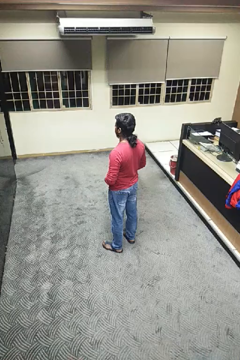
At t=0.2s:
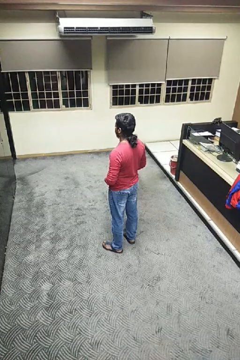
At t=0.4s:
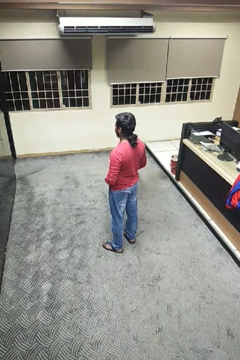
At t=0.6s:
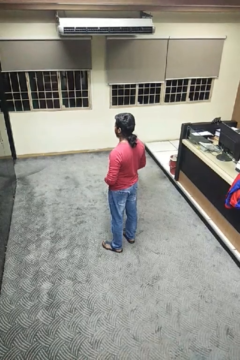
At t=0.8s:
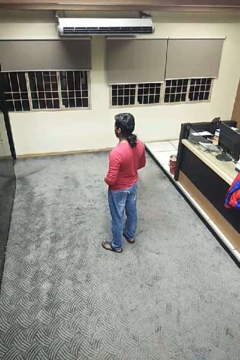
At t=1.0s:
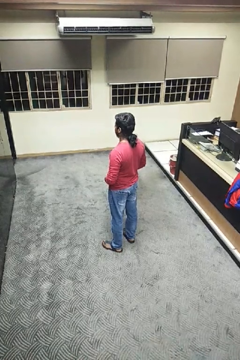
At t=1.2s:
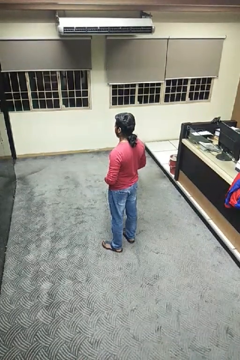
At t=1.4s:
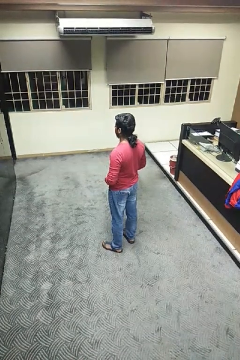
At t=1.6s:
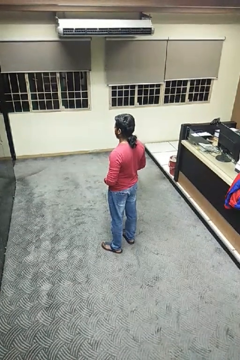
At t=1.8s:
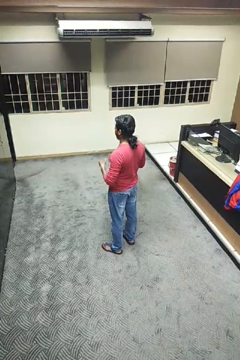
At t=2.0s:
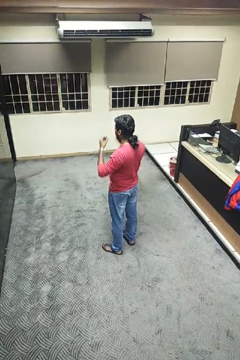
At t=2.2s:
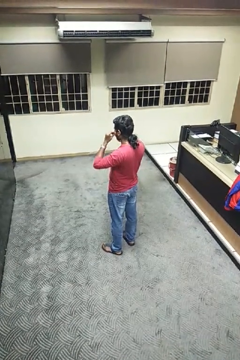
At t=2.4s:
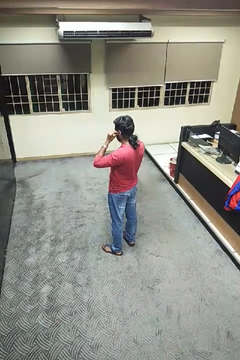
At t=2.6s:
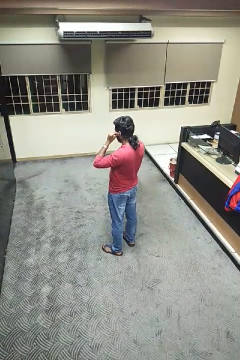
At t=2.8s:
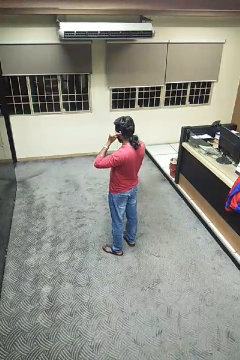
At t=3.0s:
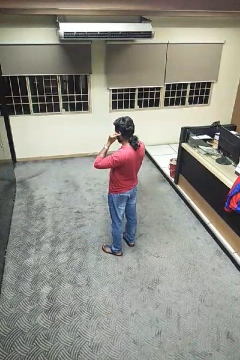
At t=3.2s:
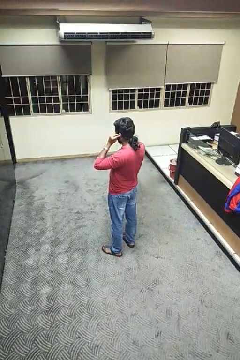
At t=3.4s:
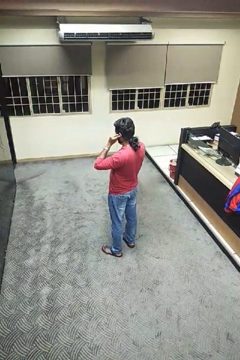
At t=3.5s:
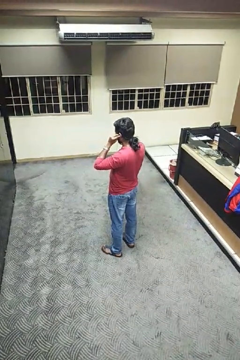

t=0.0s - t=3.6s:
person puts on headphones

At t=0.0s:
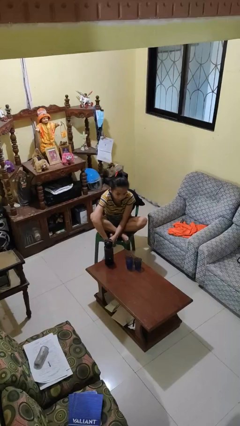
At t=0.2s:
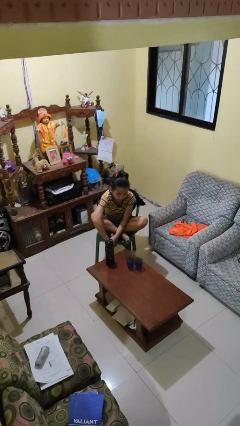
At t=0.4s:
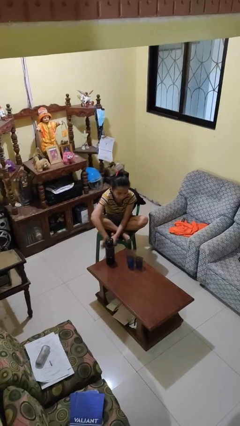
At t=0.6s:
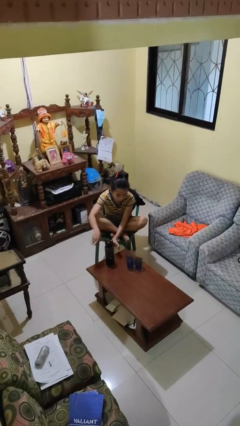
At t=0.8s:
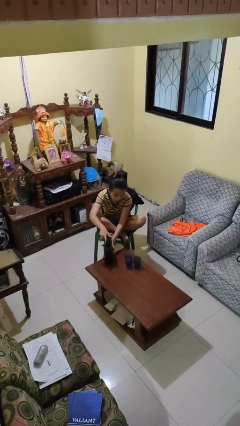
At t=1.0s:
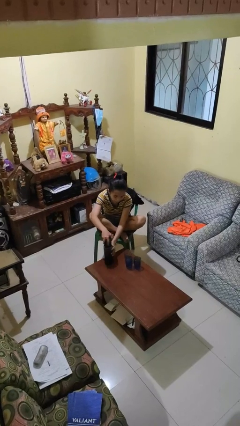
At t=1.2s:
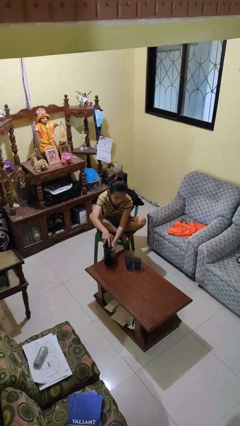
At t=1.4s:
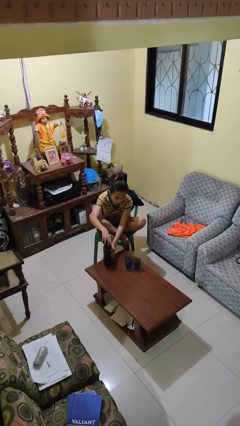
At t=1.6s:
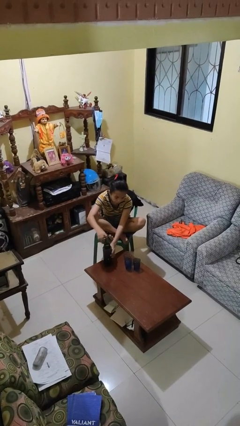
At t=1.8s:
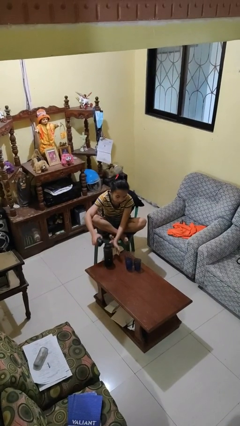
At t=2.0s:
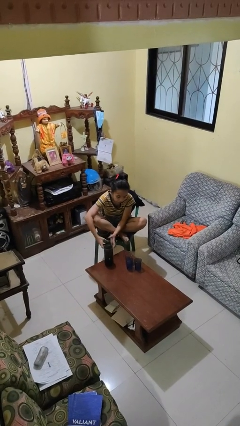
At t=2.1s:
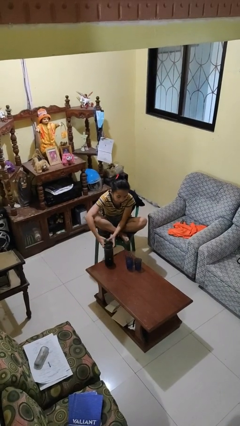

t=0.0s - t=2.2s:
person unscrews lid from bottle

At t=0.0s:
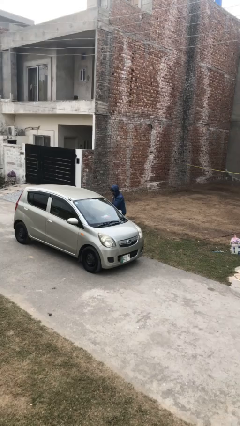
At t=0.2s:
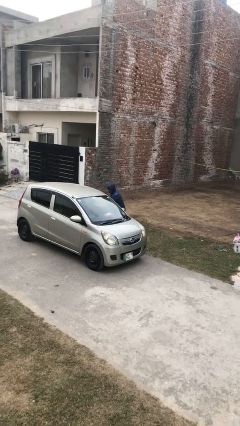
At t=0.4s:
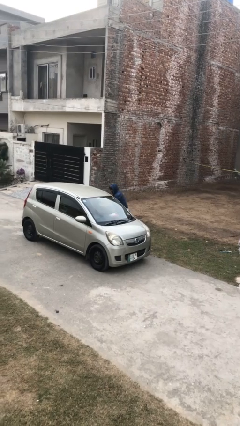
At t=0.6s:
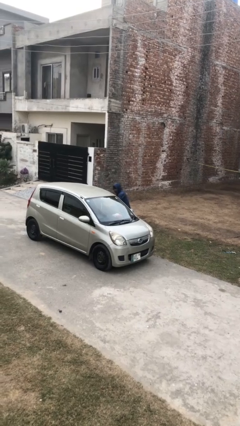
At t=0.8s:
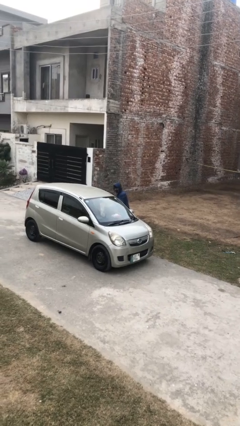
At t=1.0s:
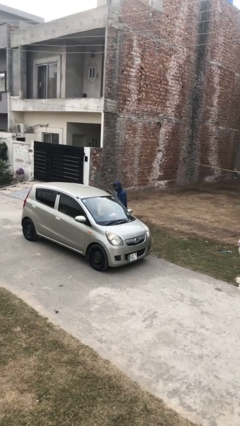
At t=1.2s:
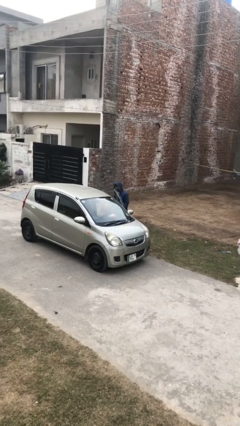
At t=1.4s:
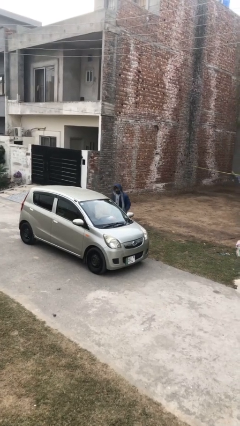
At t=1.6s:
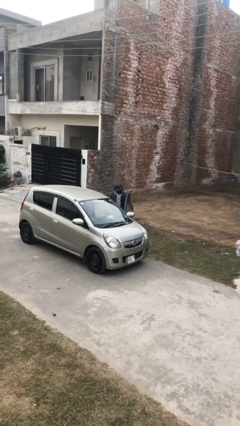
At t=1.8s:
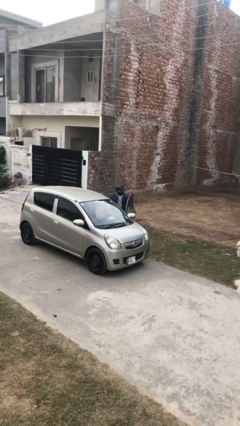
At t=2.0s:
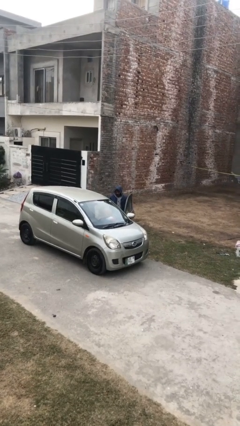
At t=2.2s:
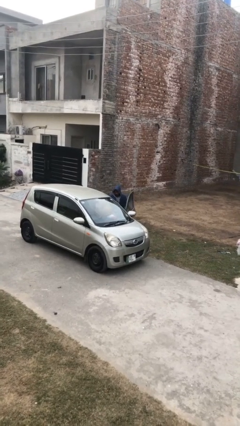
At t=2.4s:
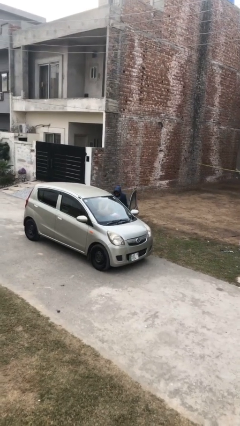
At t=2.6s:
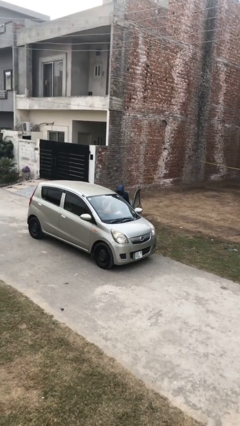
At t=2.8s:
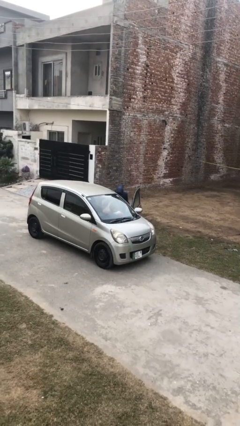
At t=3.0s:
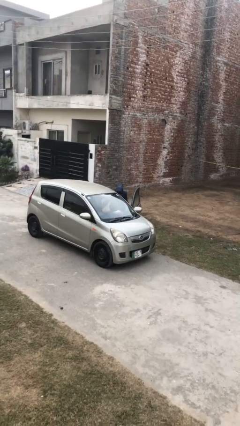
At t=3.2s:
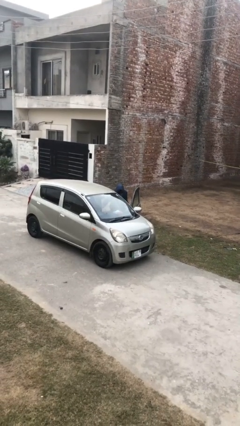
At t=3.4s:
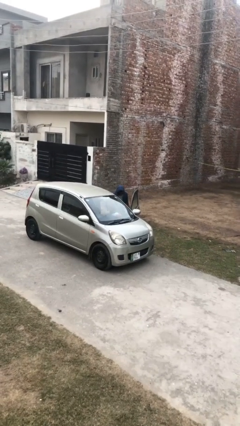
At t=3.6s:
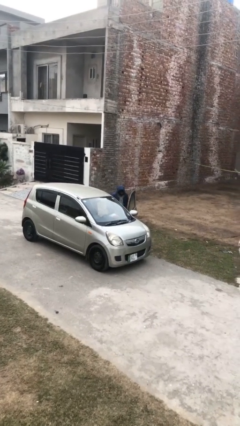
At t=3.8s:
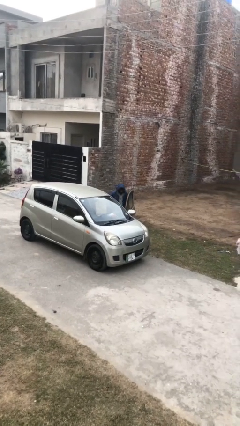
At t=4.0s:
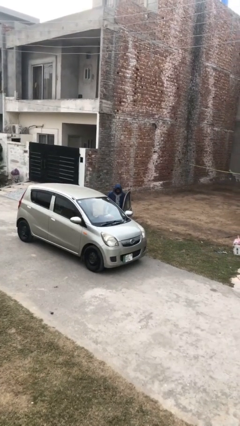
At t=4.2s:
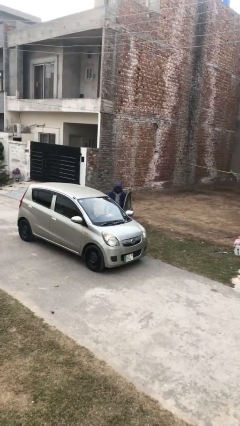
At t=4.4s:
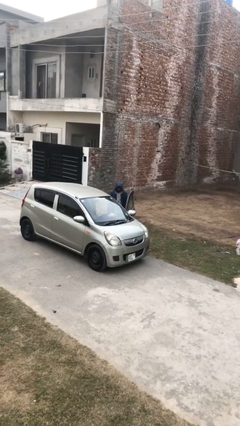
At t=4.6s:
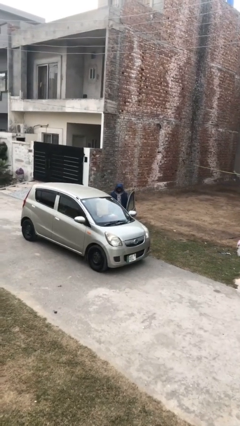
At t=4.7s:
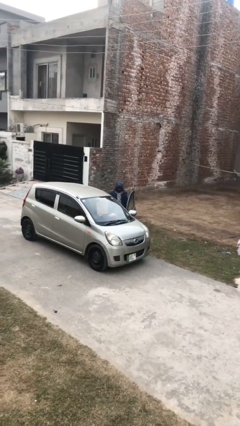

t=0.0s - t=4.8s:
person loads car

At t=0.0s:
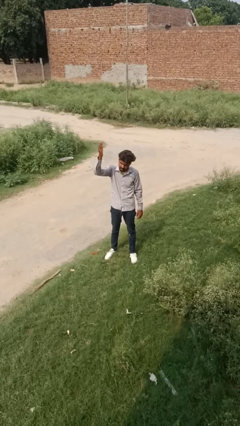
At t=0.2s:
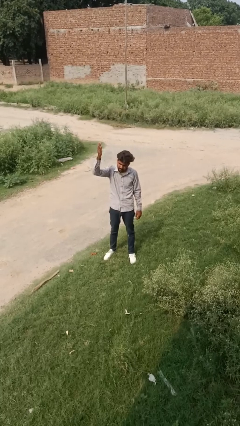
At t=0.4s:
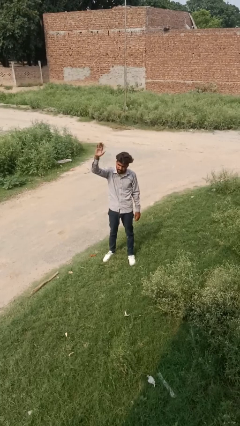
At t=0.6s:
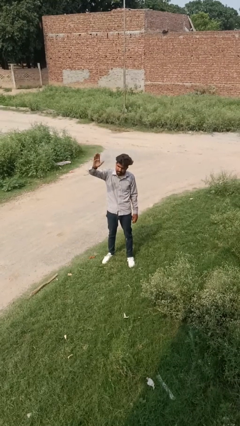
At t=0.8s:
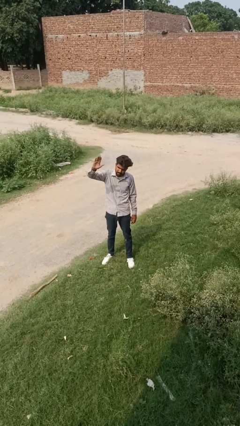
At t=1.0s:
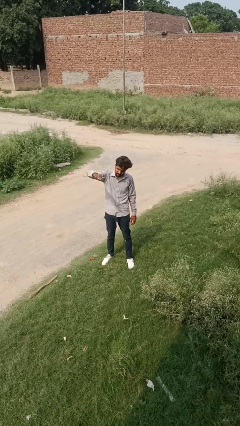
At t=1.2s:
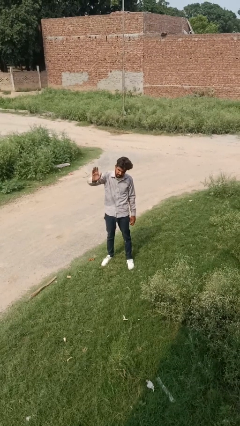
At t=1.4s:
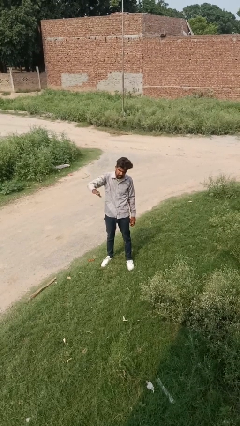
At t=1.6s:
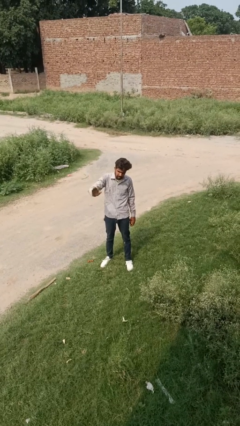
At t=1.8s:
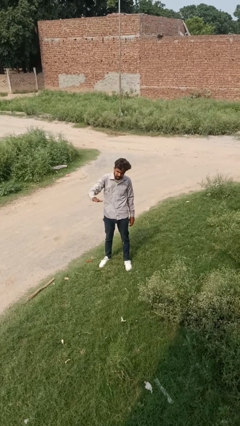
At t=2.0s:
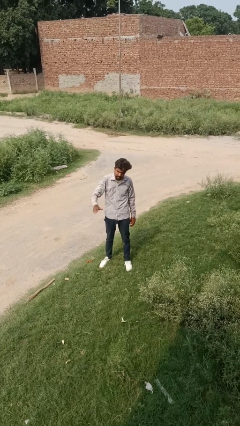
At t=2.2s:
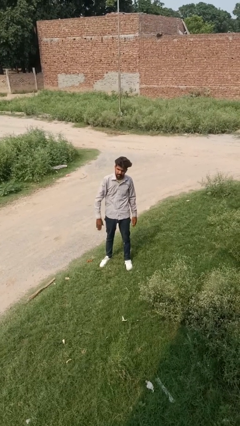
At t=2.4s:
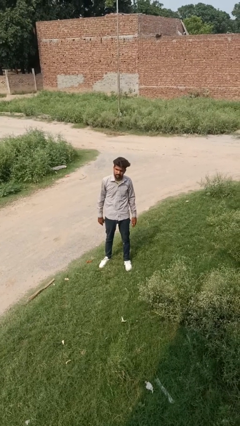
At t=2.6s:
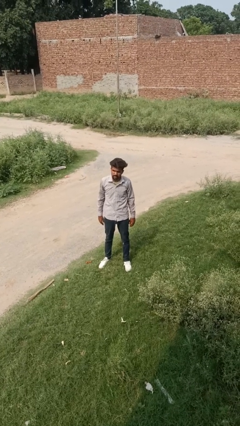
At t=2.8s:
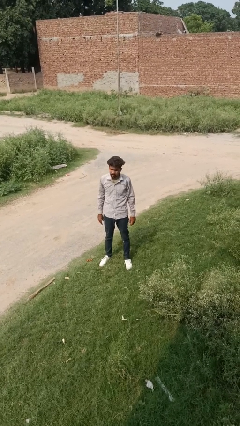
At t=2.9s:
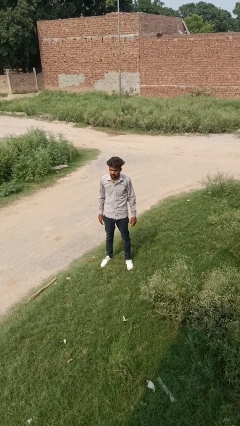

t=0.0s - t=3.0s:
person gestures swipe down

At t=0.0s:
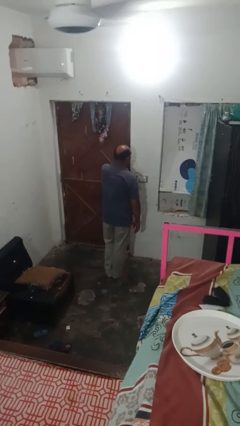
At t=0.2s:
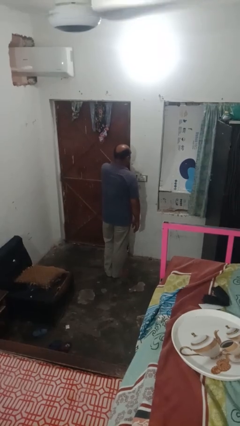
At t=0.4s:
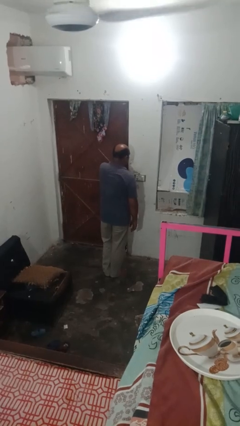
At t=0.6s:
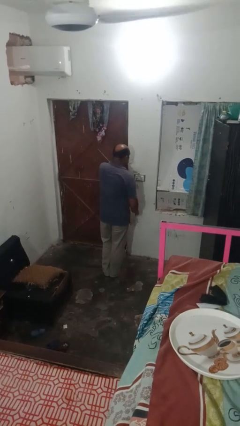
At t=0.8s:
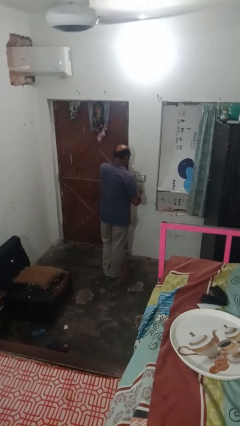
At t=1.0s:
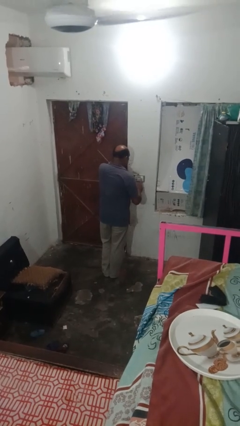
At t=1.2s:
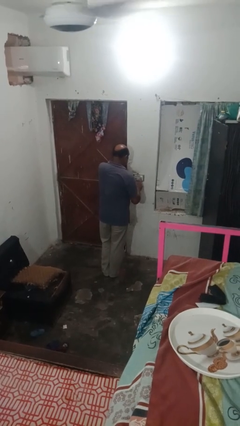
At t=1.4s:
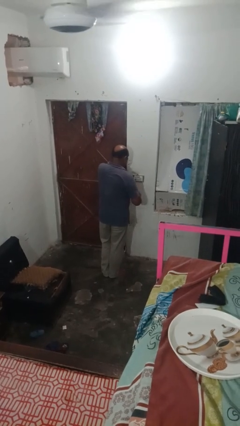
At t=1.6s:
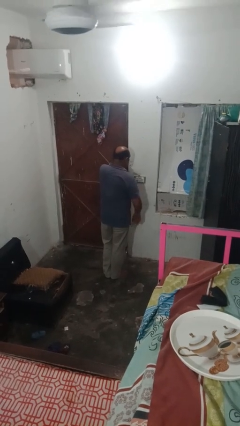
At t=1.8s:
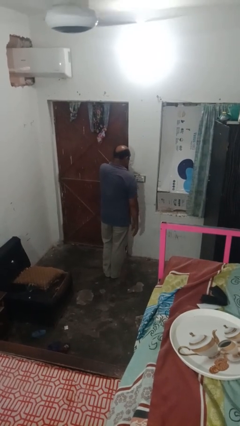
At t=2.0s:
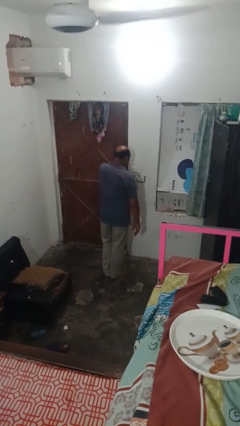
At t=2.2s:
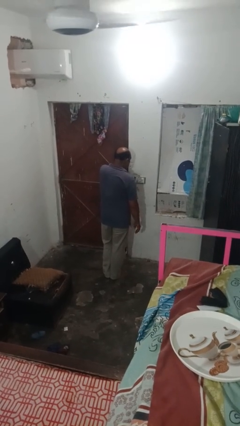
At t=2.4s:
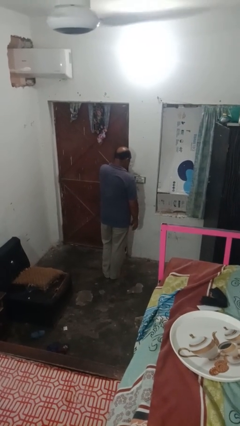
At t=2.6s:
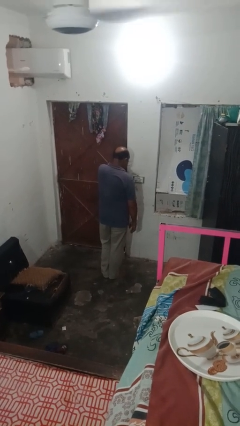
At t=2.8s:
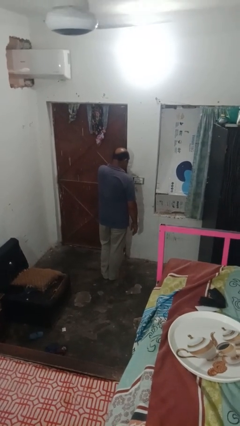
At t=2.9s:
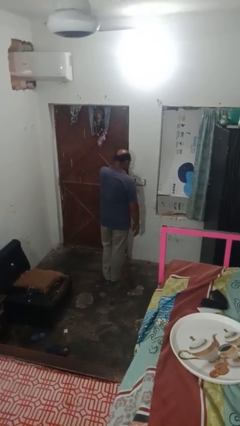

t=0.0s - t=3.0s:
person turns on fan

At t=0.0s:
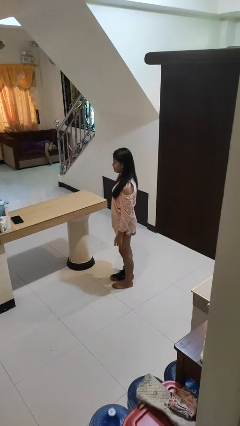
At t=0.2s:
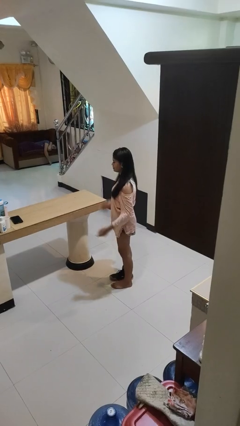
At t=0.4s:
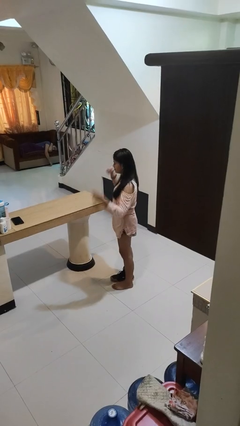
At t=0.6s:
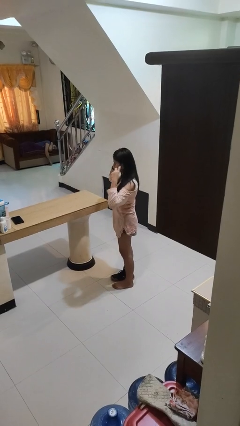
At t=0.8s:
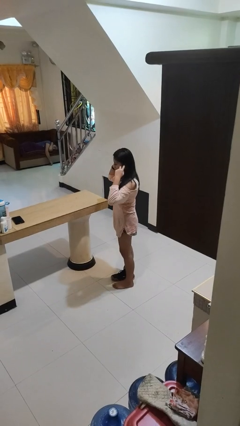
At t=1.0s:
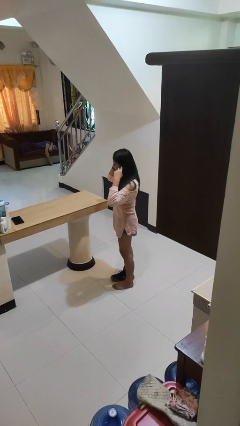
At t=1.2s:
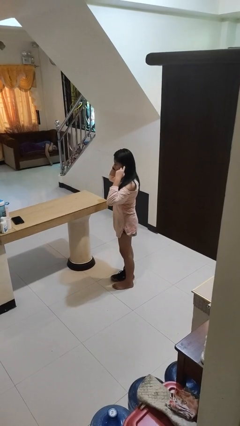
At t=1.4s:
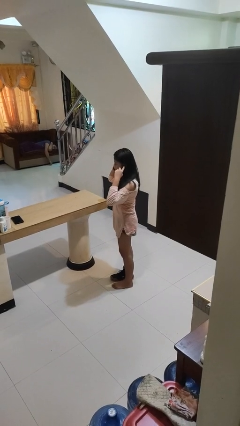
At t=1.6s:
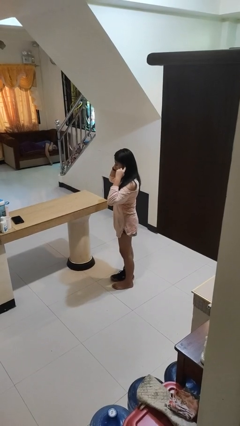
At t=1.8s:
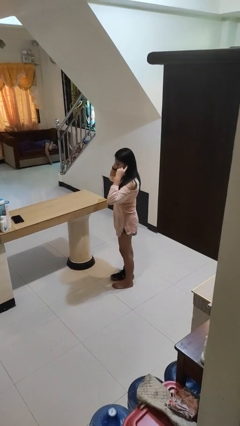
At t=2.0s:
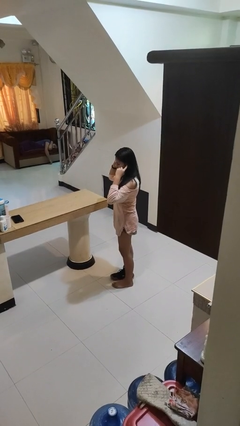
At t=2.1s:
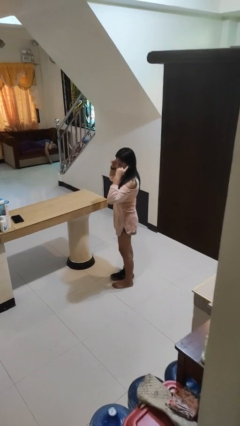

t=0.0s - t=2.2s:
person puts fingers in ear
